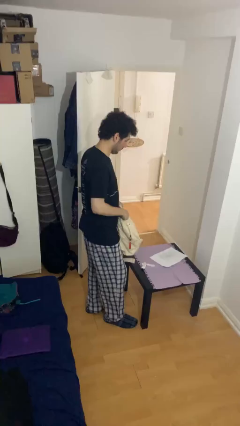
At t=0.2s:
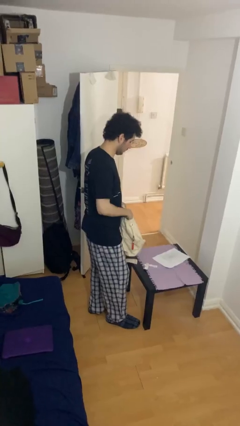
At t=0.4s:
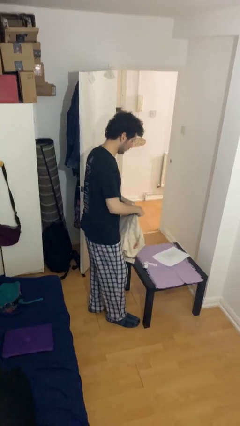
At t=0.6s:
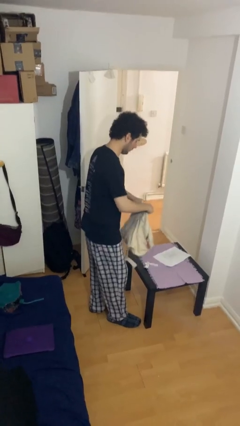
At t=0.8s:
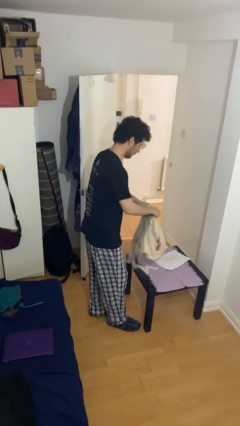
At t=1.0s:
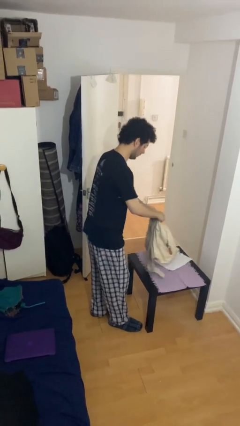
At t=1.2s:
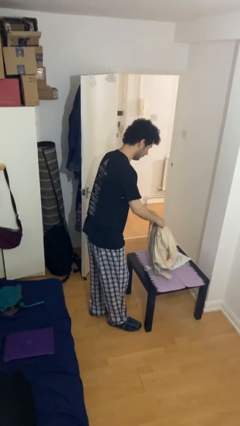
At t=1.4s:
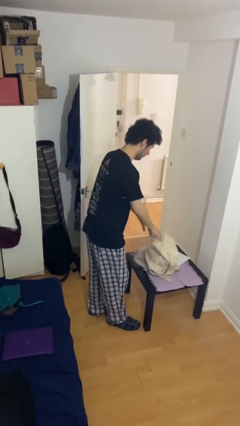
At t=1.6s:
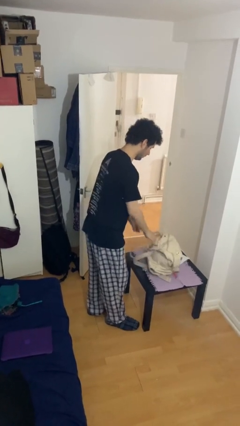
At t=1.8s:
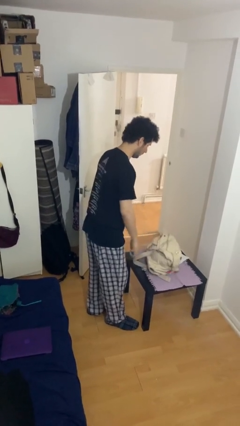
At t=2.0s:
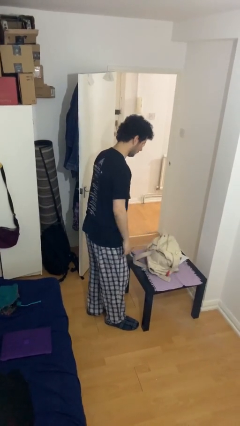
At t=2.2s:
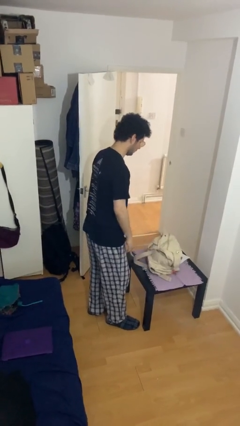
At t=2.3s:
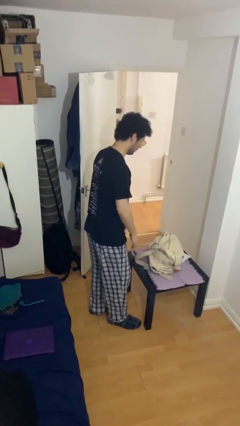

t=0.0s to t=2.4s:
person puts down object on table

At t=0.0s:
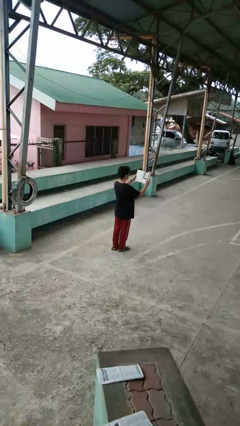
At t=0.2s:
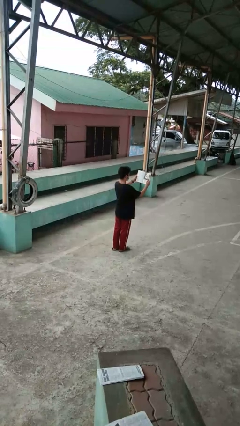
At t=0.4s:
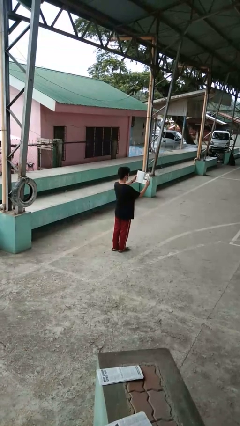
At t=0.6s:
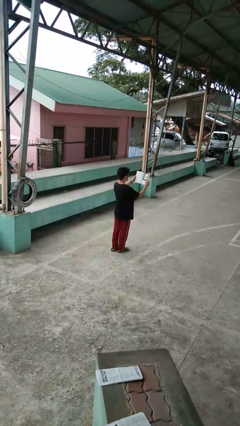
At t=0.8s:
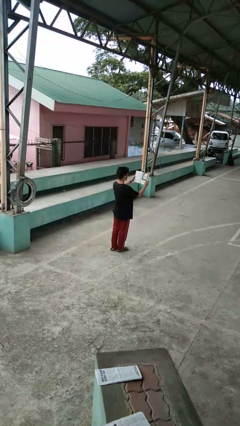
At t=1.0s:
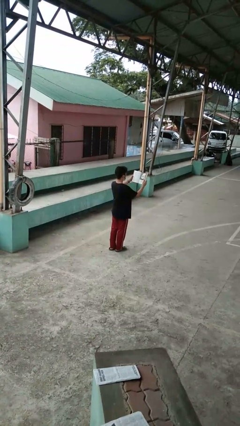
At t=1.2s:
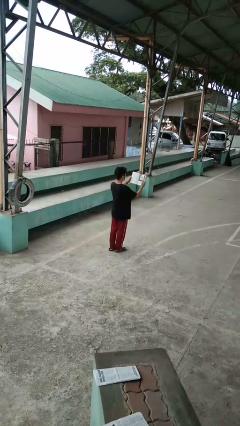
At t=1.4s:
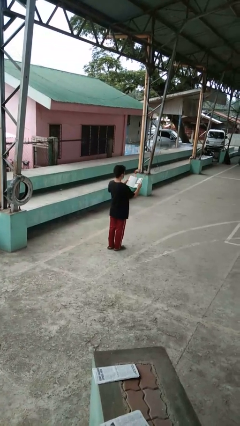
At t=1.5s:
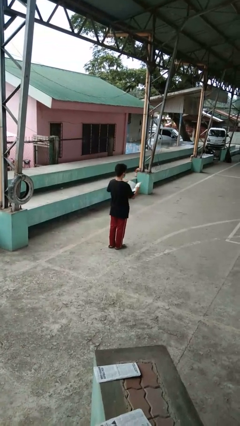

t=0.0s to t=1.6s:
person reads book

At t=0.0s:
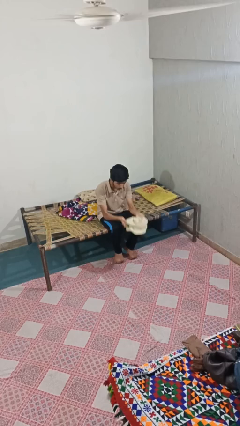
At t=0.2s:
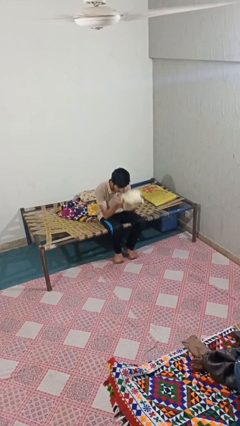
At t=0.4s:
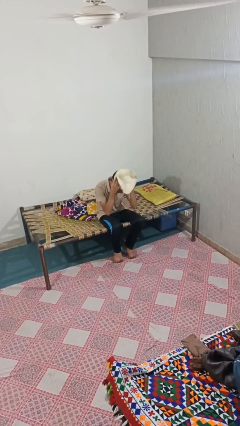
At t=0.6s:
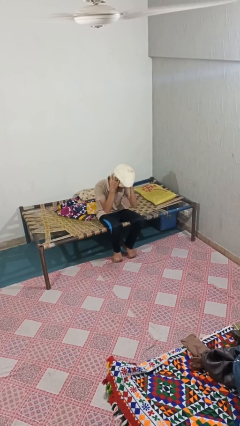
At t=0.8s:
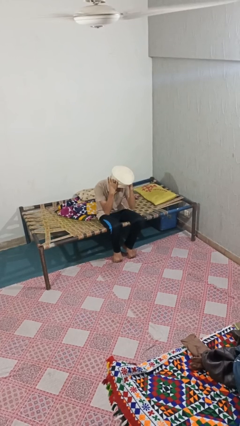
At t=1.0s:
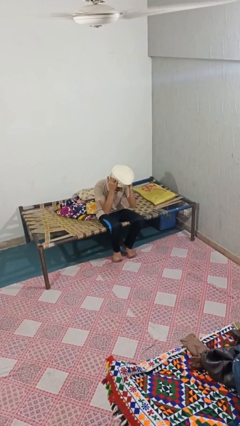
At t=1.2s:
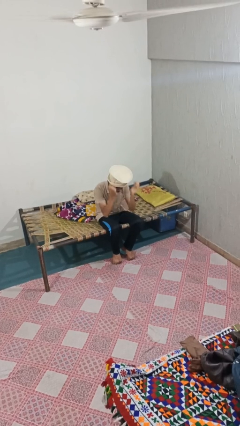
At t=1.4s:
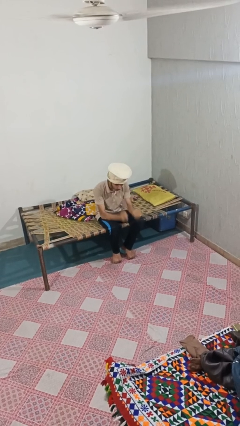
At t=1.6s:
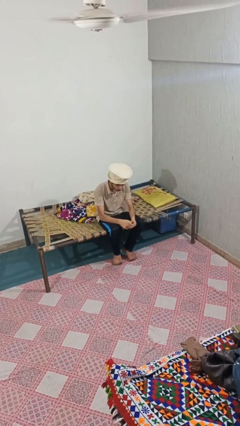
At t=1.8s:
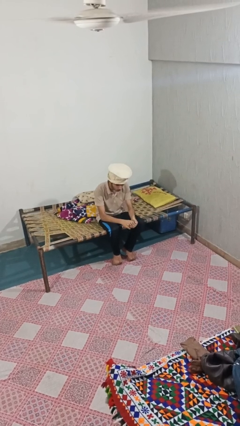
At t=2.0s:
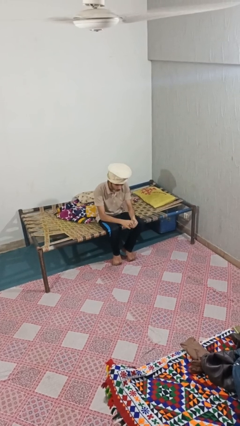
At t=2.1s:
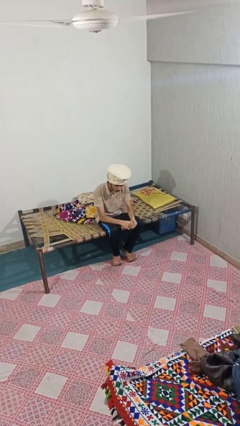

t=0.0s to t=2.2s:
person puts on hat

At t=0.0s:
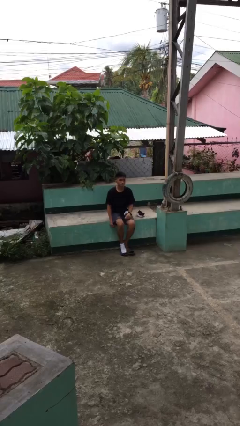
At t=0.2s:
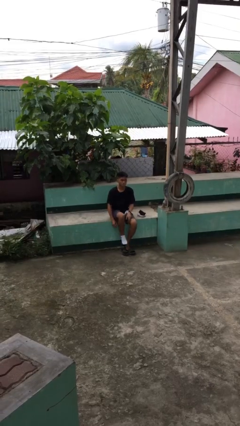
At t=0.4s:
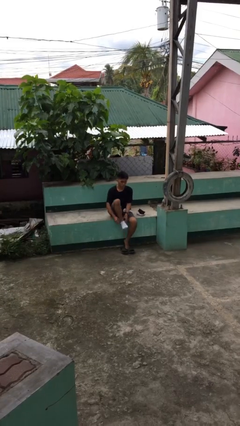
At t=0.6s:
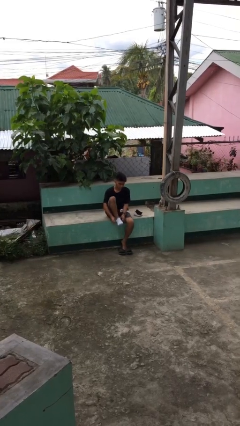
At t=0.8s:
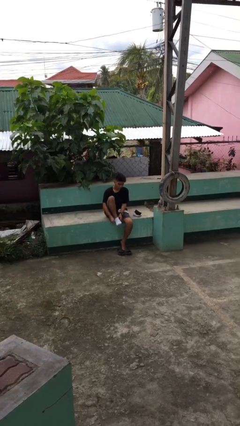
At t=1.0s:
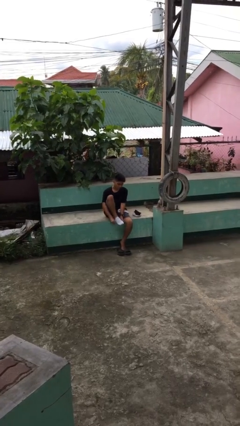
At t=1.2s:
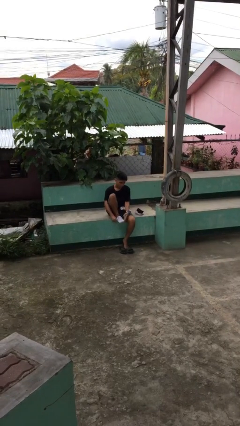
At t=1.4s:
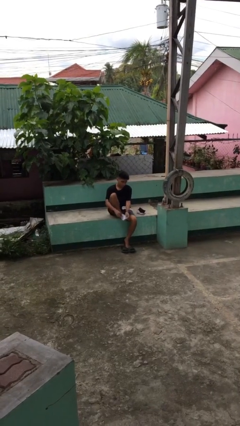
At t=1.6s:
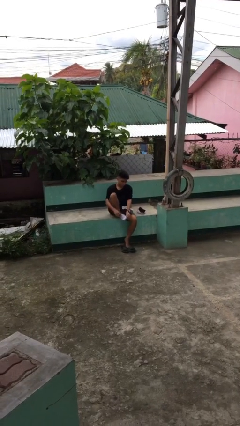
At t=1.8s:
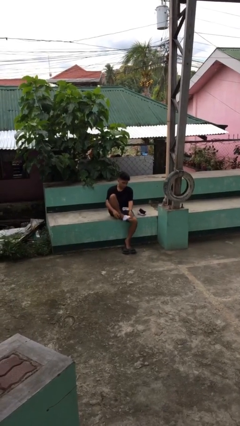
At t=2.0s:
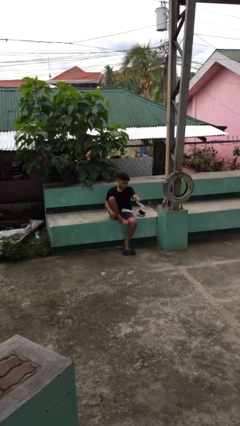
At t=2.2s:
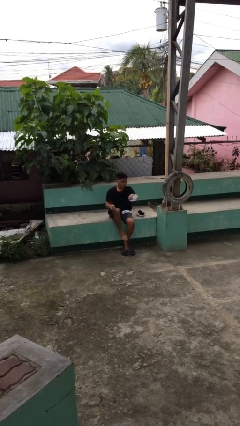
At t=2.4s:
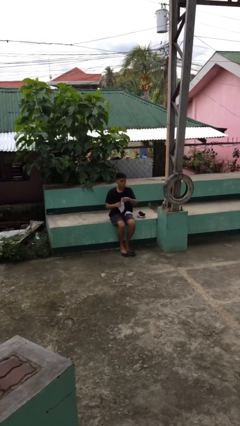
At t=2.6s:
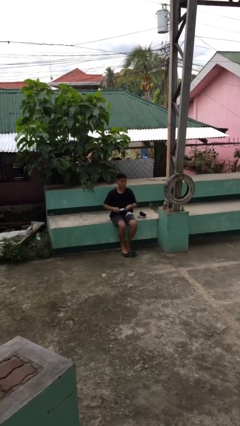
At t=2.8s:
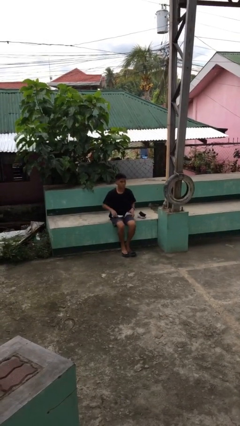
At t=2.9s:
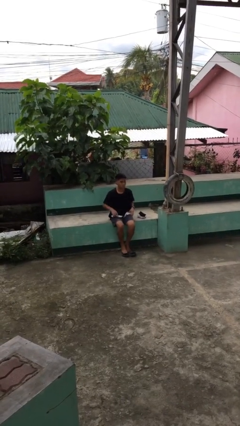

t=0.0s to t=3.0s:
person takes off socks

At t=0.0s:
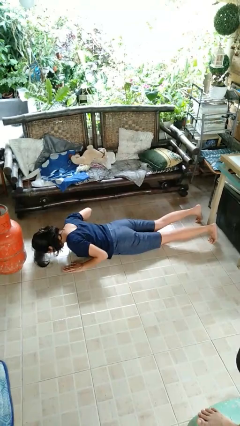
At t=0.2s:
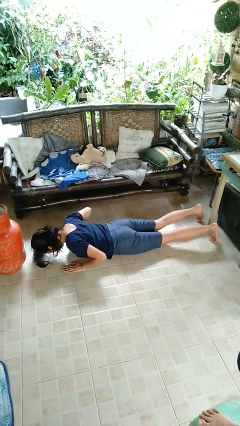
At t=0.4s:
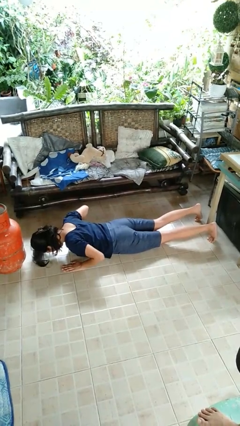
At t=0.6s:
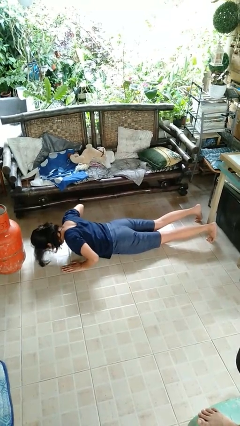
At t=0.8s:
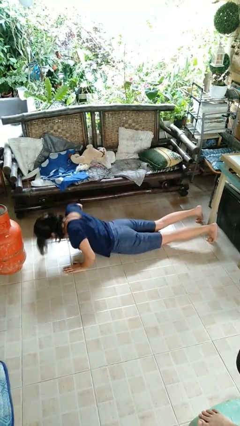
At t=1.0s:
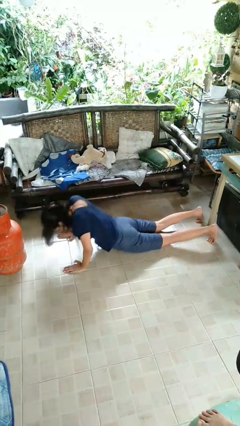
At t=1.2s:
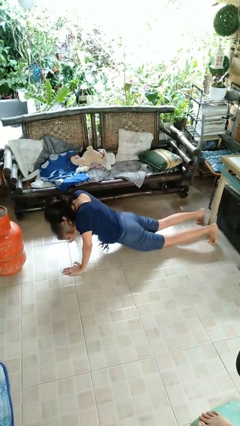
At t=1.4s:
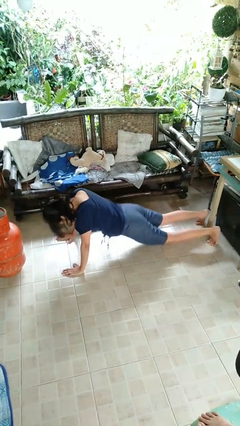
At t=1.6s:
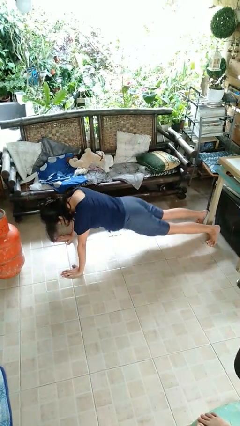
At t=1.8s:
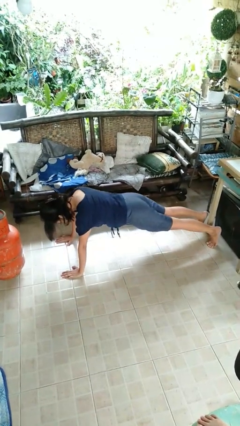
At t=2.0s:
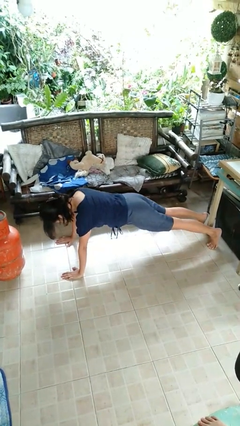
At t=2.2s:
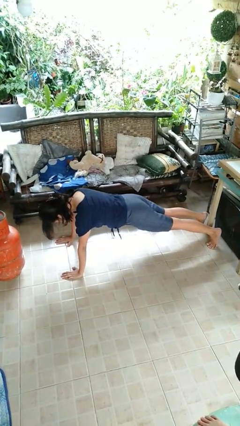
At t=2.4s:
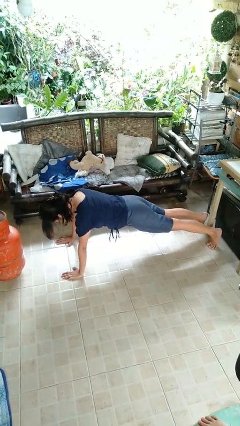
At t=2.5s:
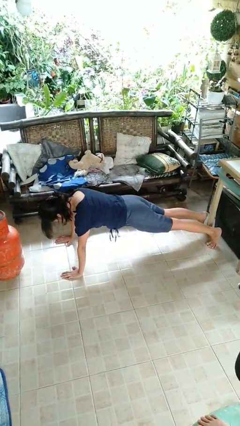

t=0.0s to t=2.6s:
person exercises with pushup

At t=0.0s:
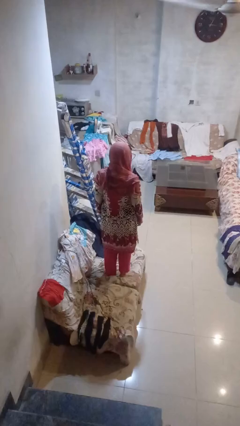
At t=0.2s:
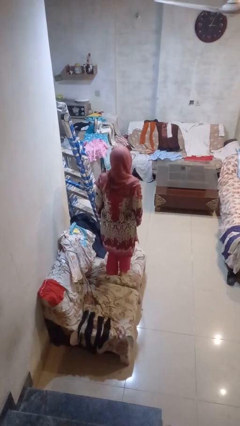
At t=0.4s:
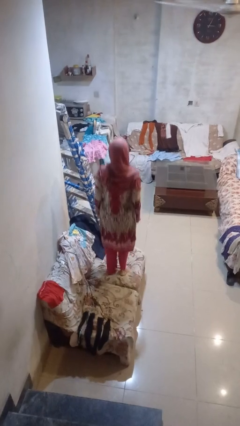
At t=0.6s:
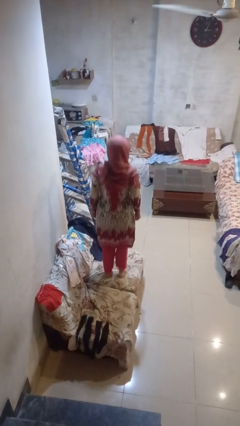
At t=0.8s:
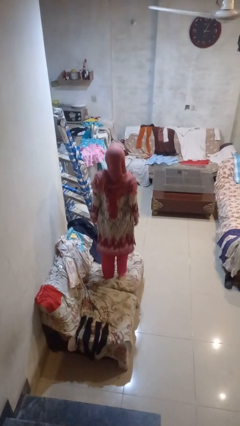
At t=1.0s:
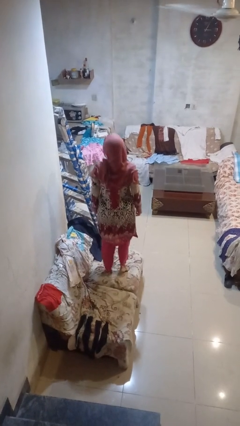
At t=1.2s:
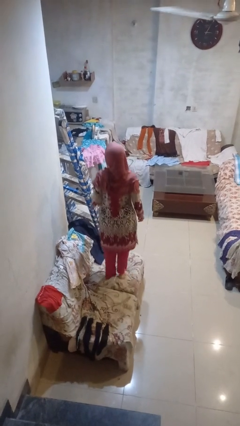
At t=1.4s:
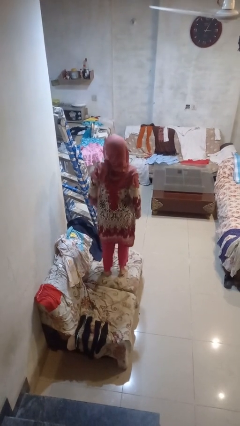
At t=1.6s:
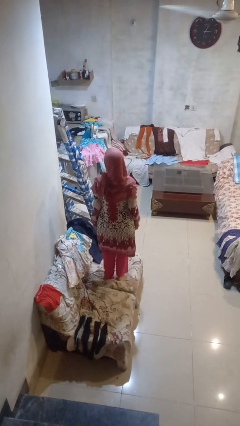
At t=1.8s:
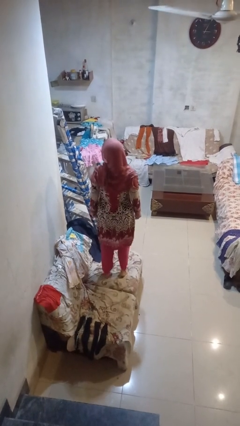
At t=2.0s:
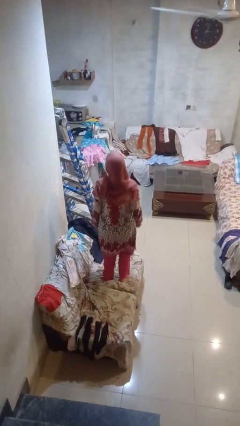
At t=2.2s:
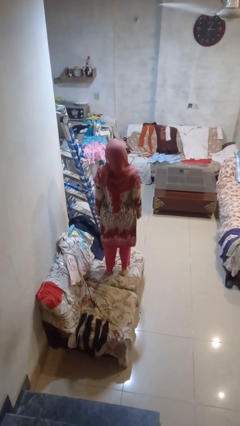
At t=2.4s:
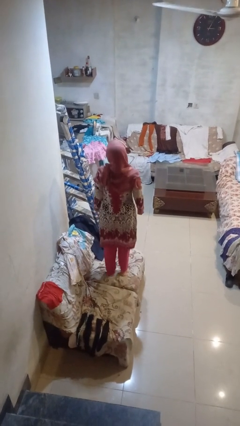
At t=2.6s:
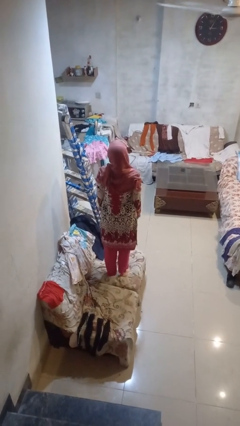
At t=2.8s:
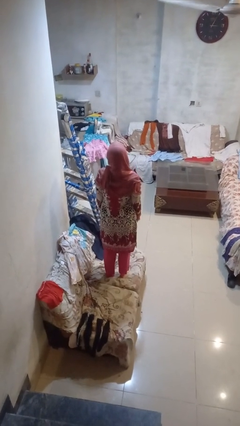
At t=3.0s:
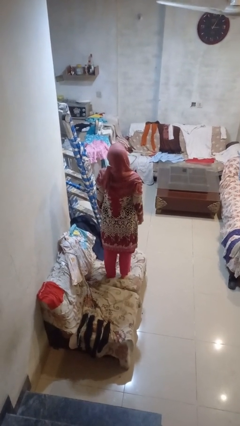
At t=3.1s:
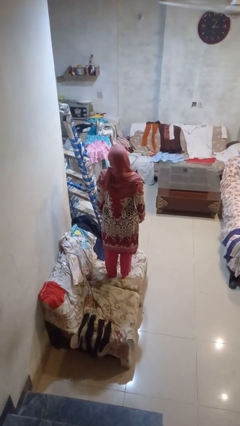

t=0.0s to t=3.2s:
person jumps on couch

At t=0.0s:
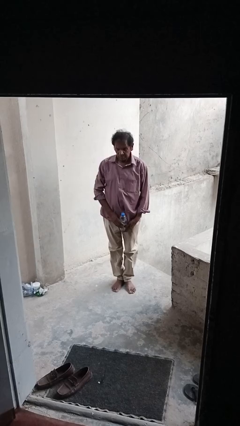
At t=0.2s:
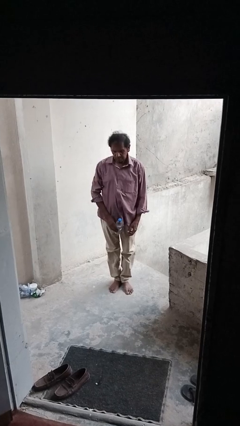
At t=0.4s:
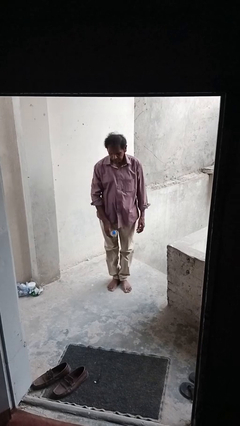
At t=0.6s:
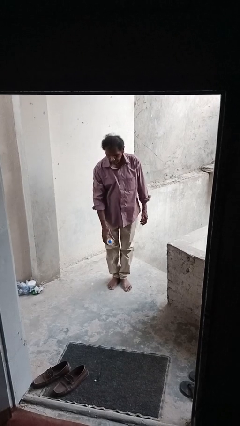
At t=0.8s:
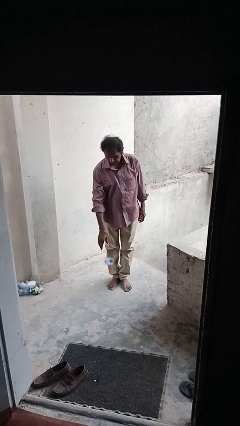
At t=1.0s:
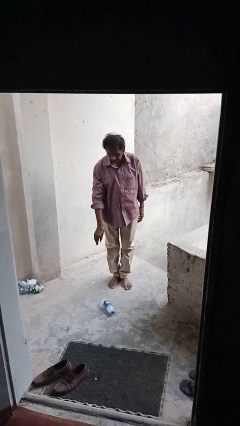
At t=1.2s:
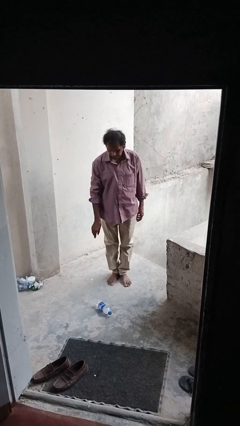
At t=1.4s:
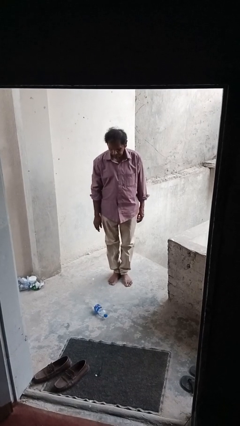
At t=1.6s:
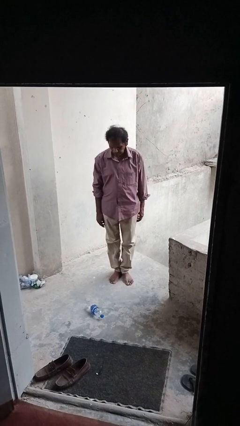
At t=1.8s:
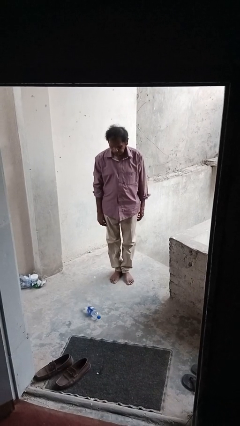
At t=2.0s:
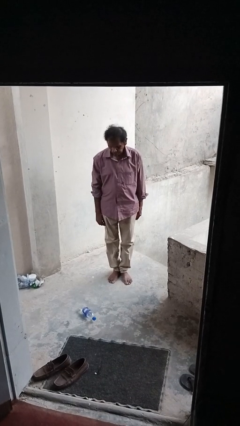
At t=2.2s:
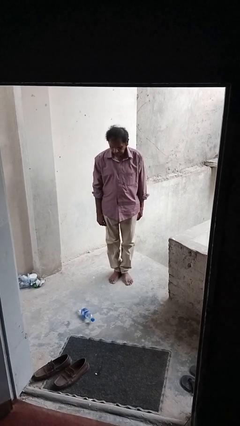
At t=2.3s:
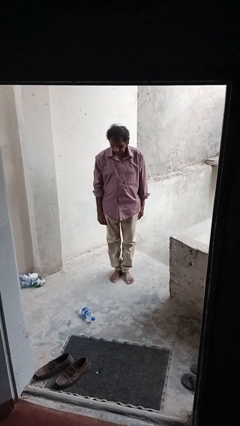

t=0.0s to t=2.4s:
person throws object to ground
